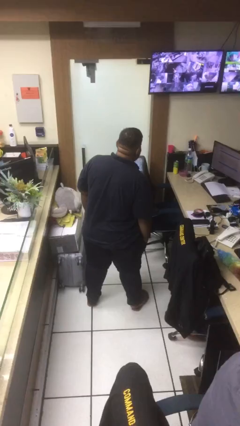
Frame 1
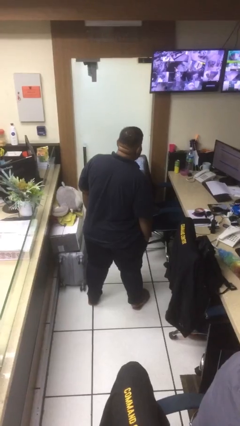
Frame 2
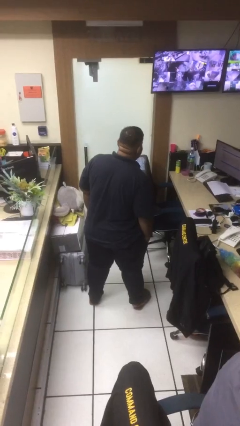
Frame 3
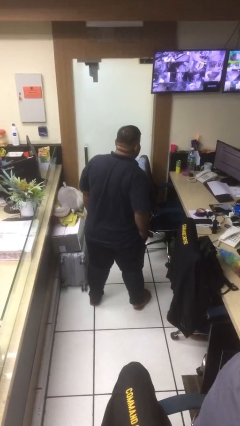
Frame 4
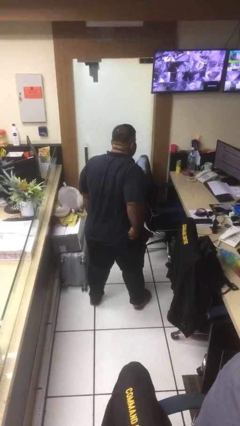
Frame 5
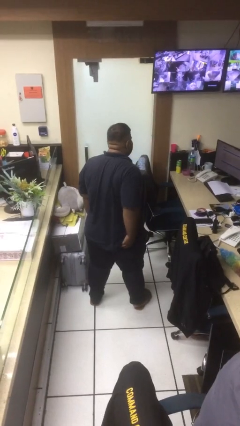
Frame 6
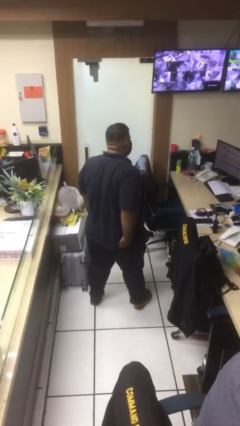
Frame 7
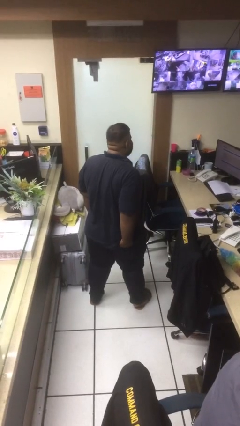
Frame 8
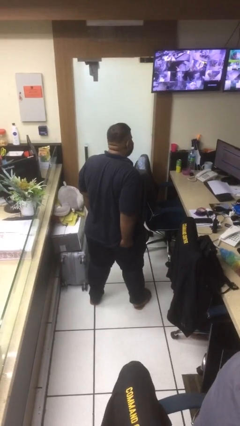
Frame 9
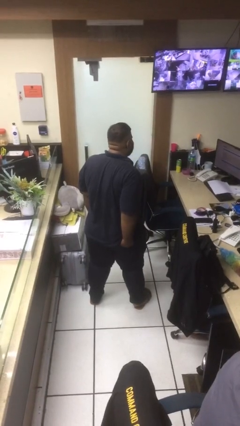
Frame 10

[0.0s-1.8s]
person puts hands in back pockets

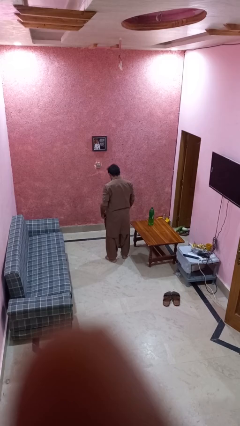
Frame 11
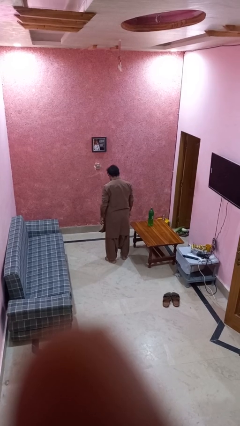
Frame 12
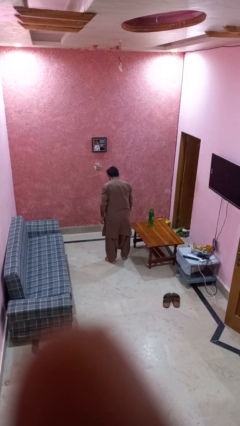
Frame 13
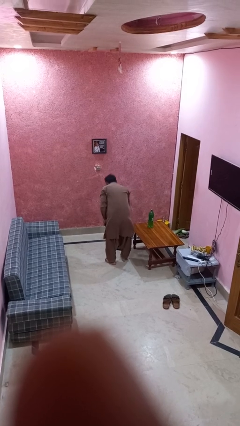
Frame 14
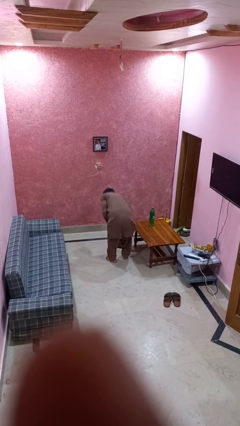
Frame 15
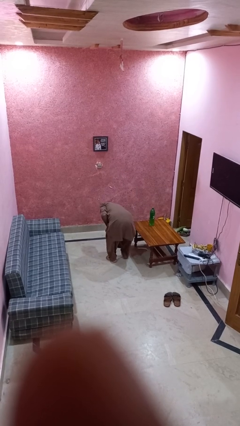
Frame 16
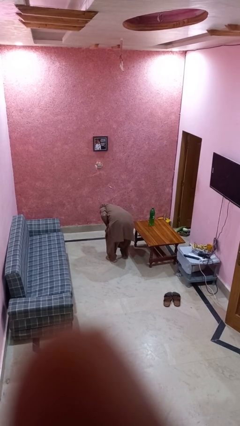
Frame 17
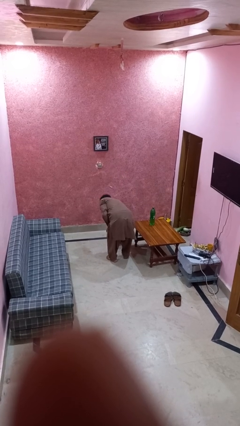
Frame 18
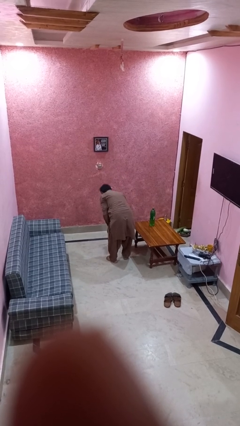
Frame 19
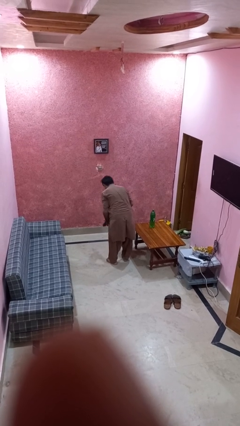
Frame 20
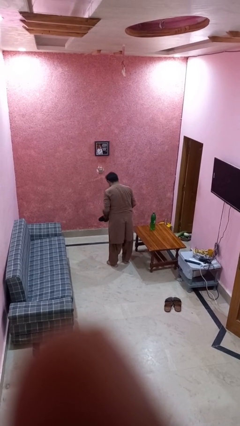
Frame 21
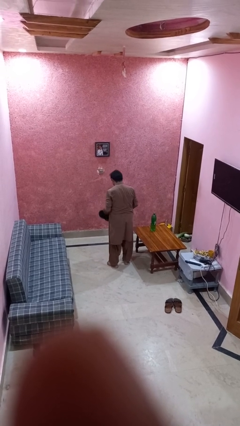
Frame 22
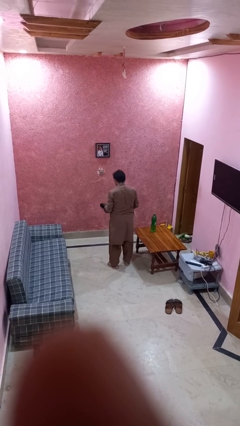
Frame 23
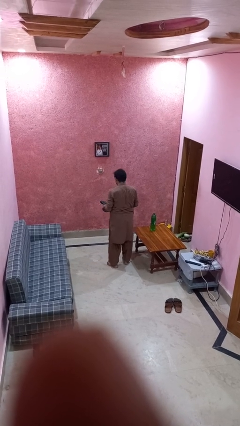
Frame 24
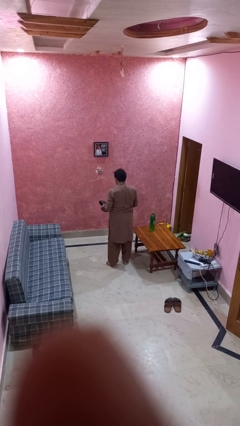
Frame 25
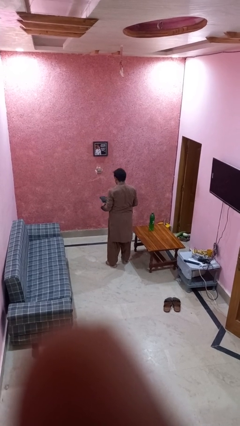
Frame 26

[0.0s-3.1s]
person picks up object from floor

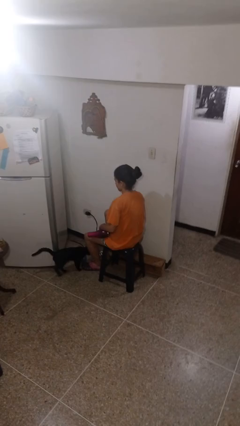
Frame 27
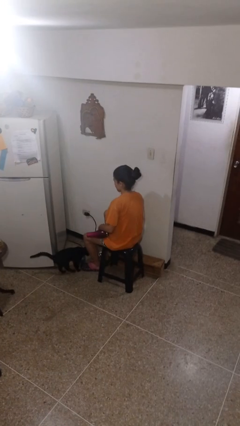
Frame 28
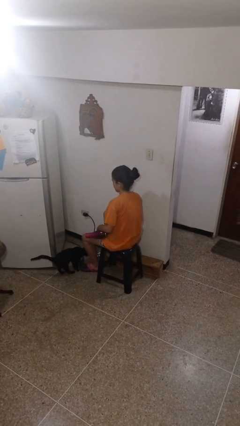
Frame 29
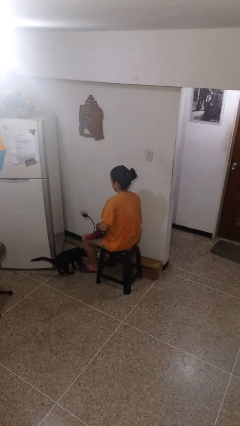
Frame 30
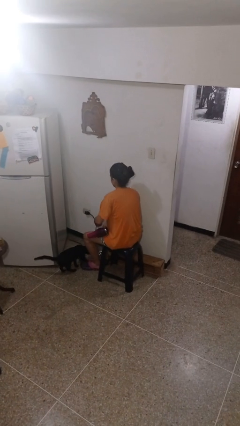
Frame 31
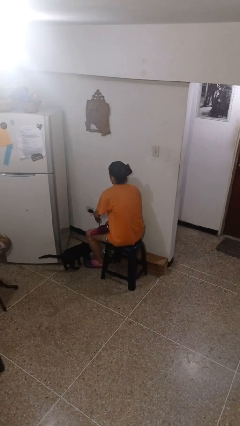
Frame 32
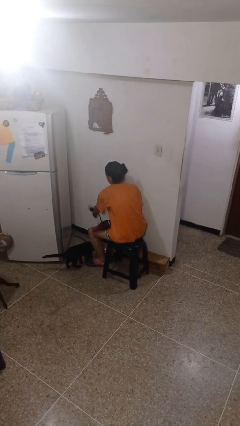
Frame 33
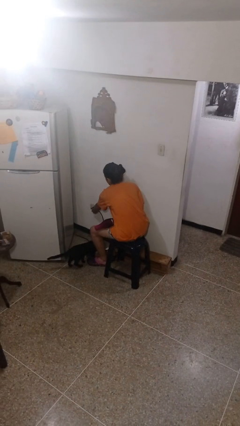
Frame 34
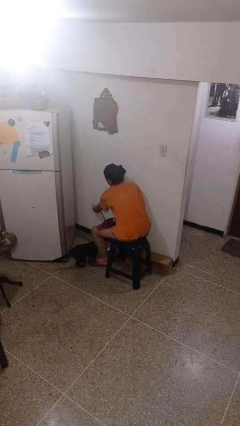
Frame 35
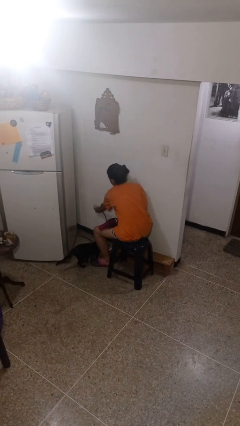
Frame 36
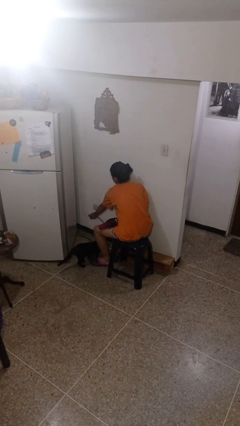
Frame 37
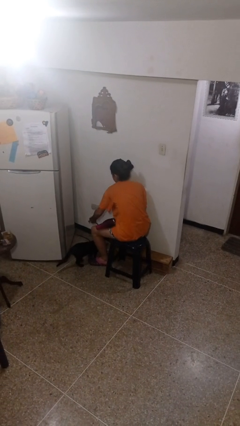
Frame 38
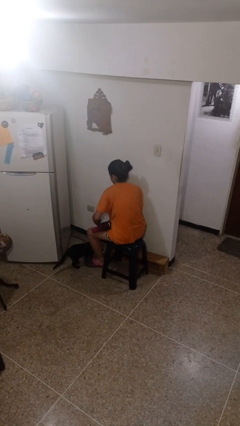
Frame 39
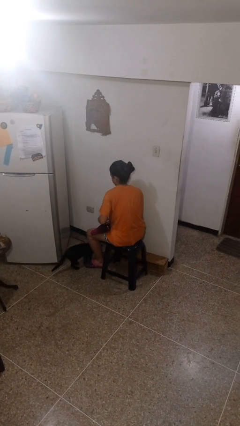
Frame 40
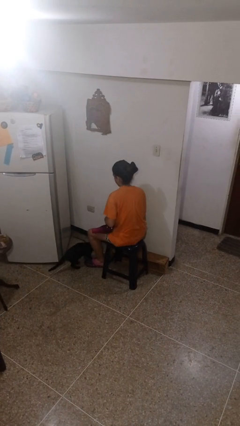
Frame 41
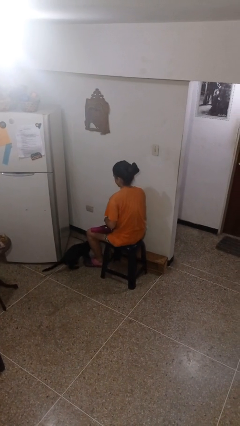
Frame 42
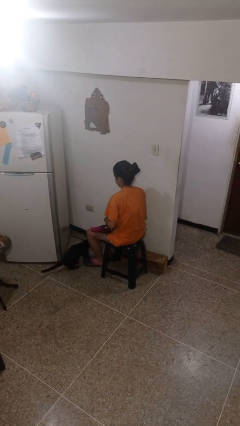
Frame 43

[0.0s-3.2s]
person unplugs from electrical socket

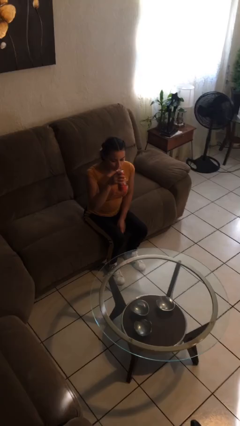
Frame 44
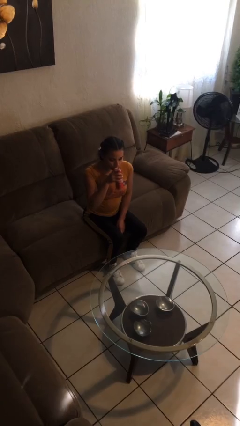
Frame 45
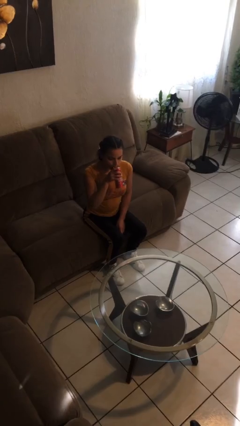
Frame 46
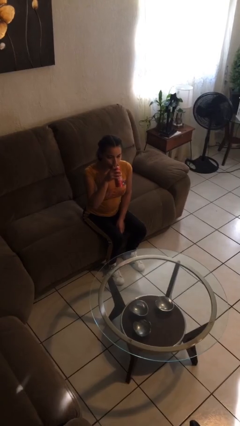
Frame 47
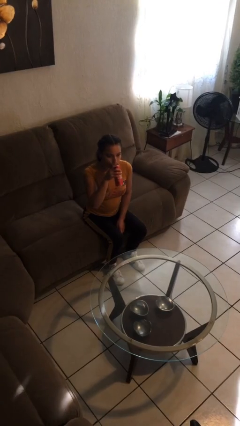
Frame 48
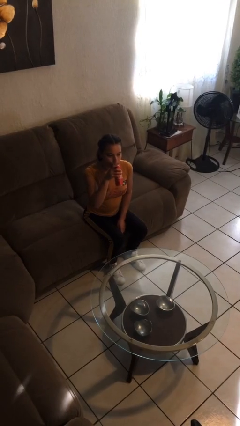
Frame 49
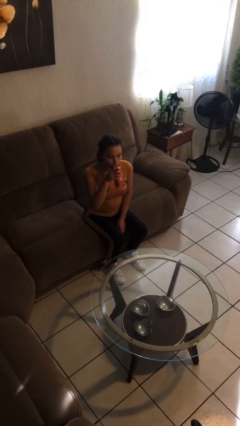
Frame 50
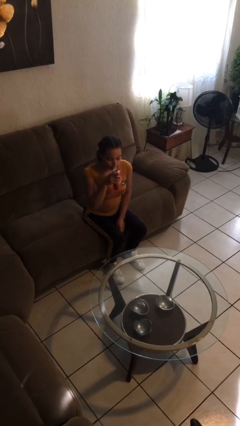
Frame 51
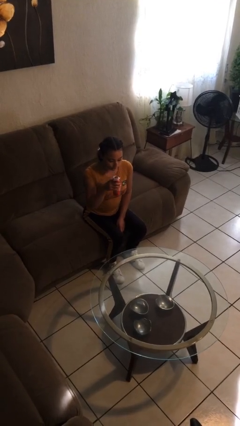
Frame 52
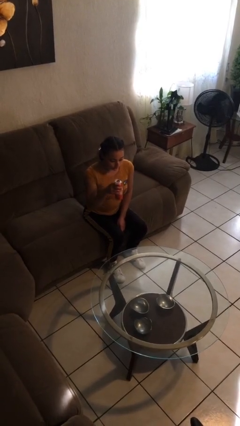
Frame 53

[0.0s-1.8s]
person drinks from beverage can

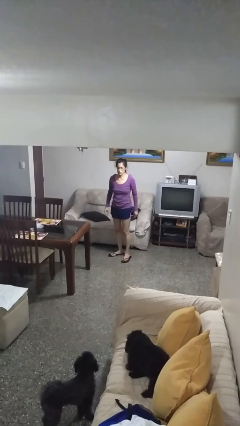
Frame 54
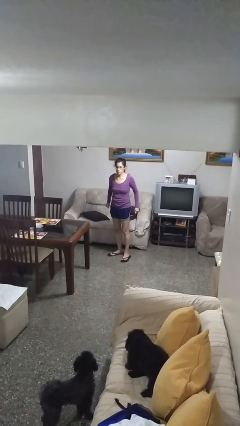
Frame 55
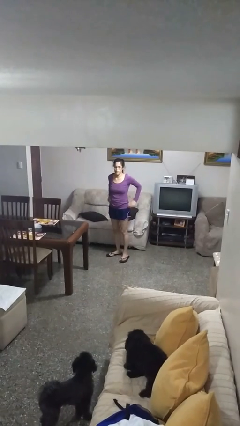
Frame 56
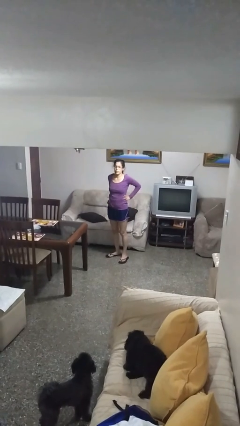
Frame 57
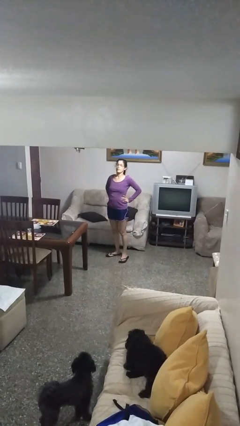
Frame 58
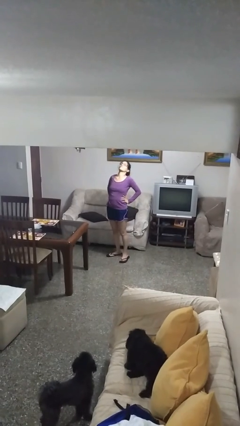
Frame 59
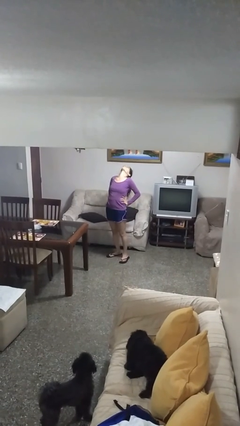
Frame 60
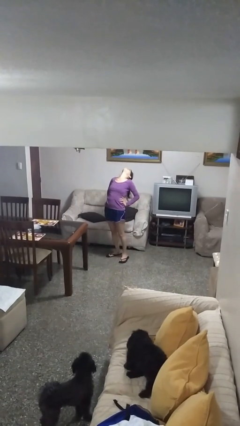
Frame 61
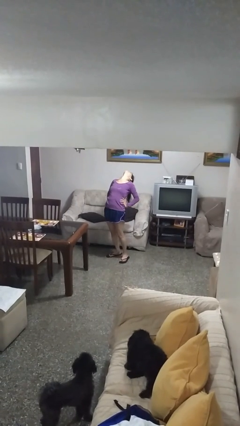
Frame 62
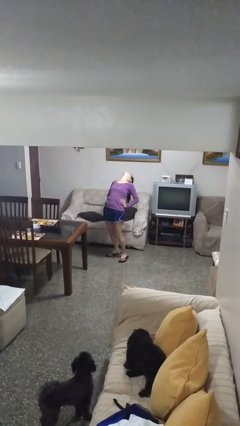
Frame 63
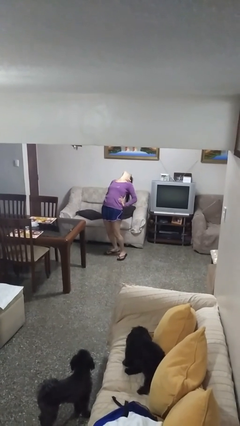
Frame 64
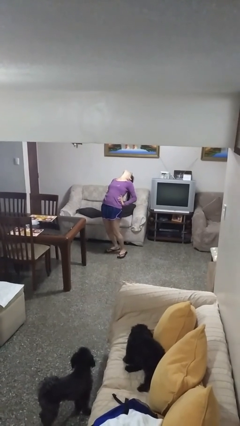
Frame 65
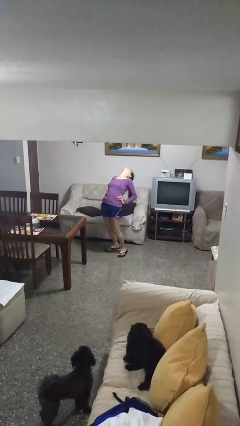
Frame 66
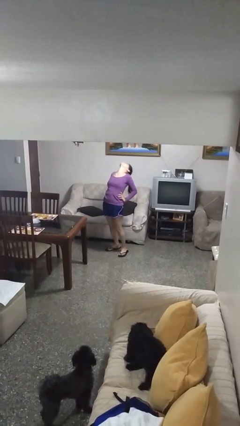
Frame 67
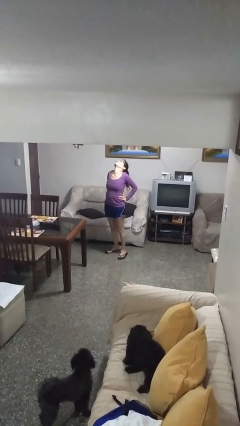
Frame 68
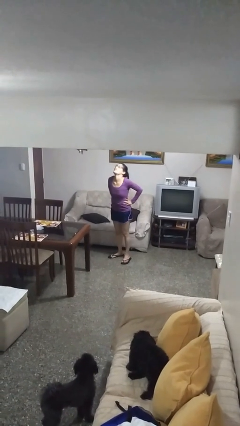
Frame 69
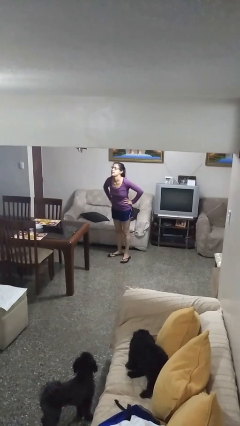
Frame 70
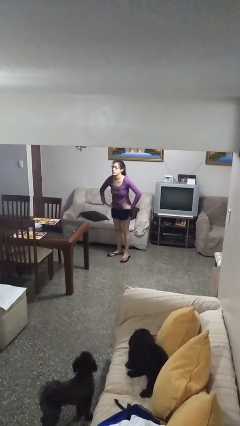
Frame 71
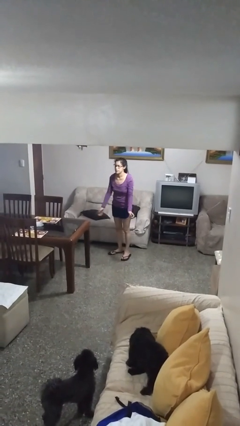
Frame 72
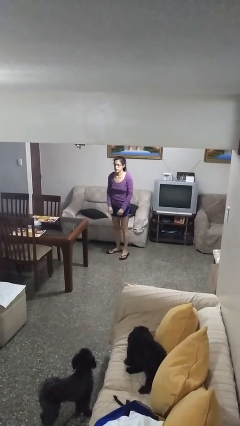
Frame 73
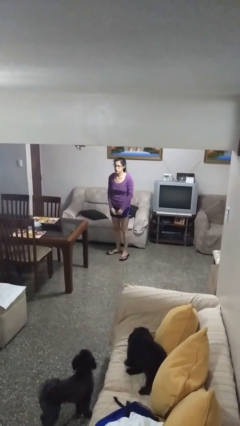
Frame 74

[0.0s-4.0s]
person stretches back

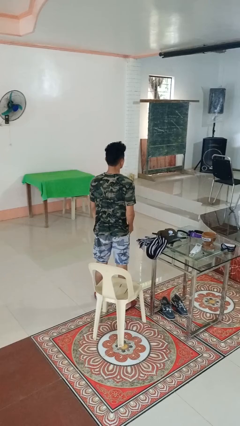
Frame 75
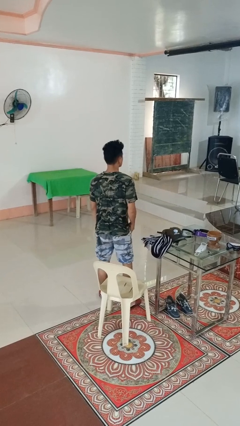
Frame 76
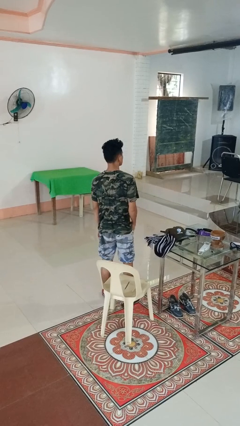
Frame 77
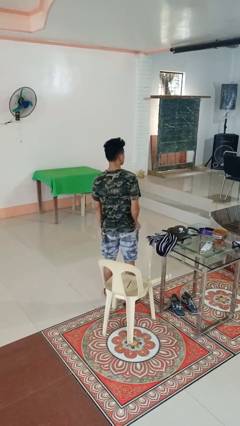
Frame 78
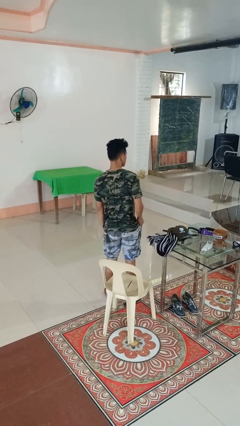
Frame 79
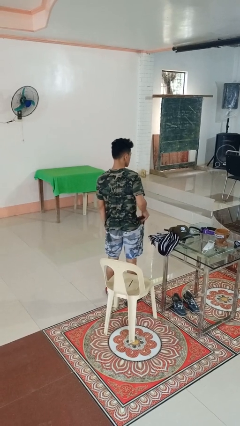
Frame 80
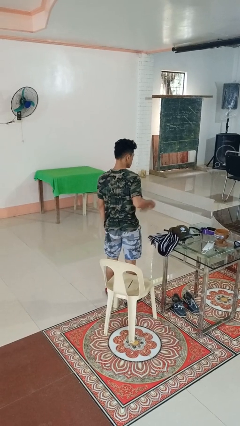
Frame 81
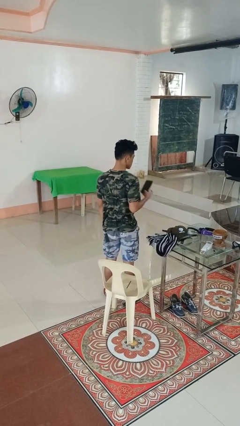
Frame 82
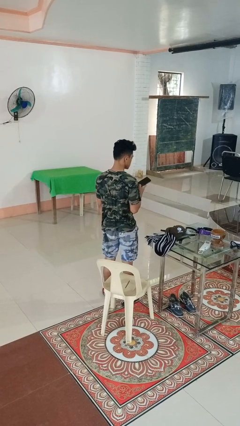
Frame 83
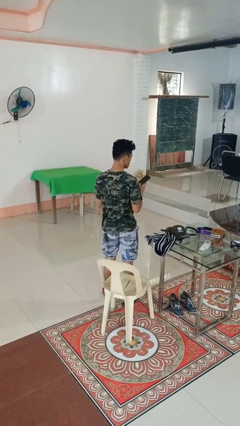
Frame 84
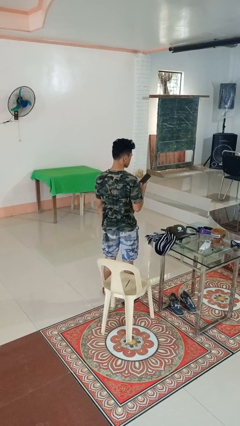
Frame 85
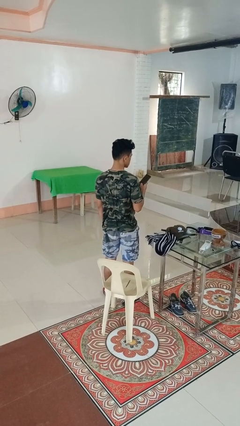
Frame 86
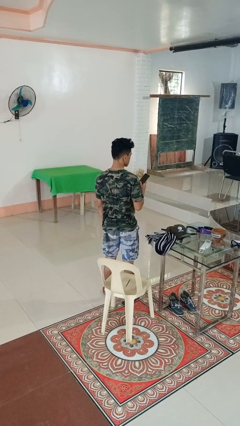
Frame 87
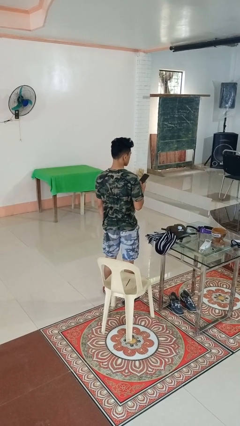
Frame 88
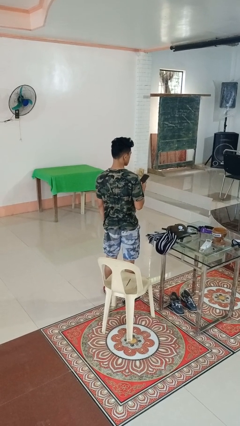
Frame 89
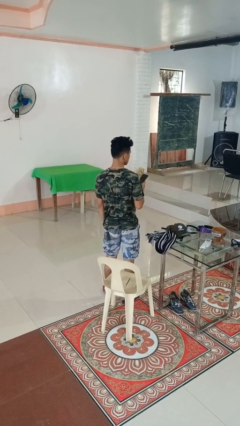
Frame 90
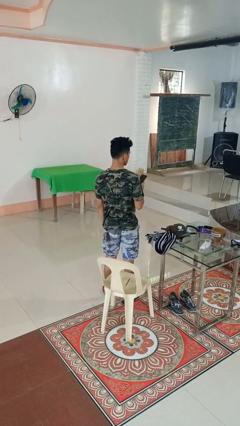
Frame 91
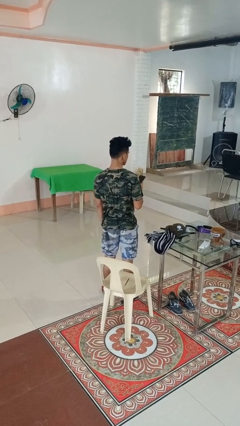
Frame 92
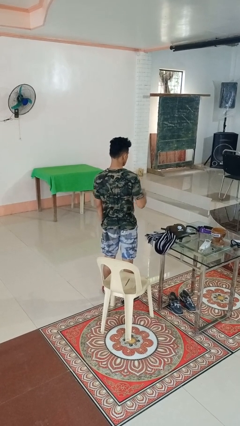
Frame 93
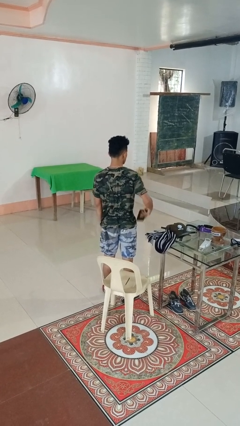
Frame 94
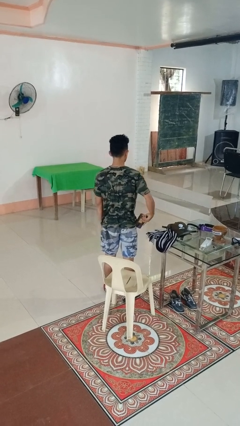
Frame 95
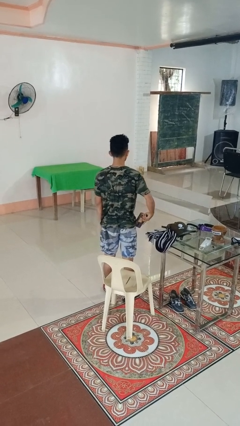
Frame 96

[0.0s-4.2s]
person takes phone from pocket
